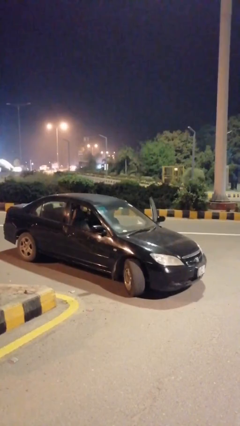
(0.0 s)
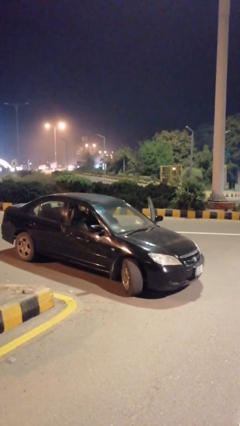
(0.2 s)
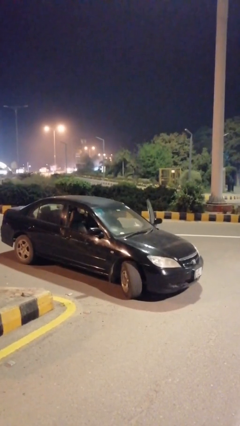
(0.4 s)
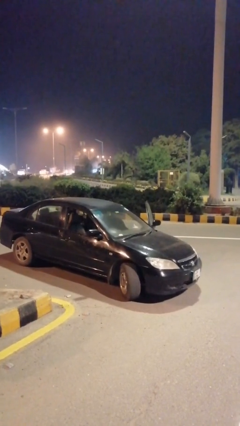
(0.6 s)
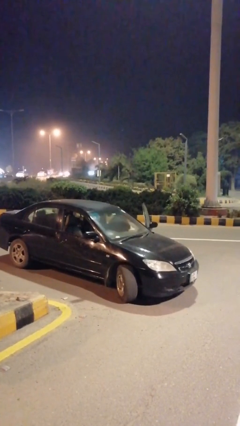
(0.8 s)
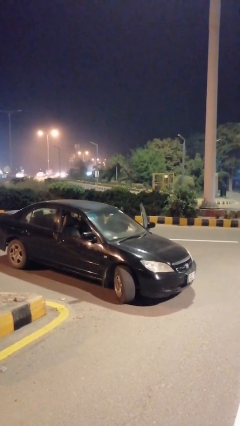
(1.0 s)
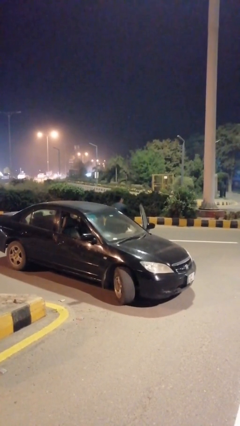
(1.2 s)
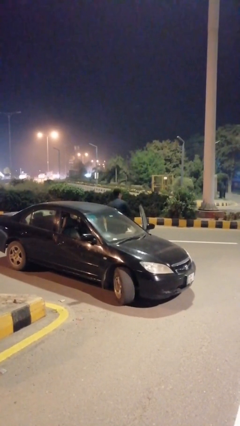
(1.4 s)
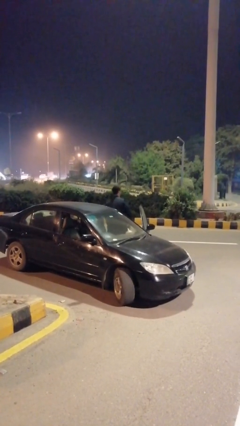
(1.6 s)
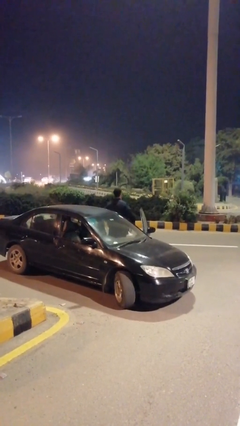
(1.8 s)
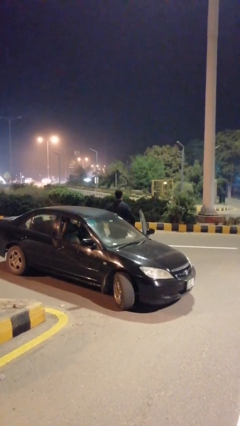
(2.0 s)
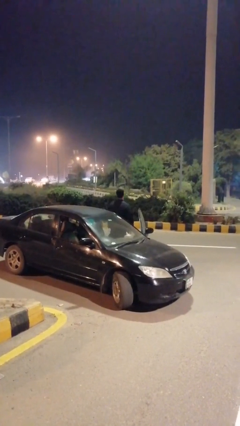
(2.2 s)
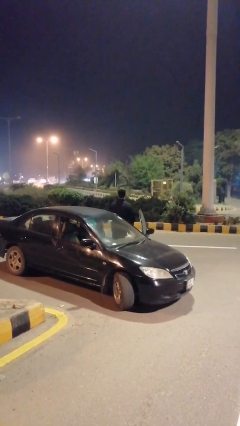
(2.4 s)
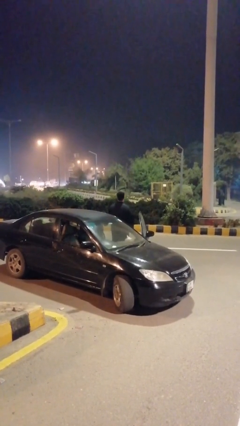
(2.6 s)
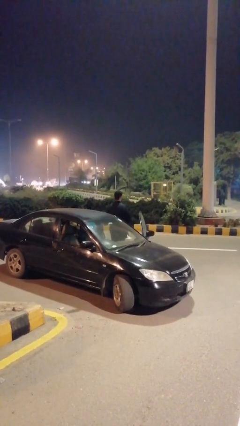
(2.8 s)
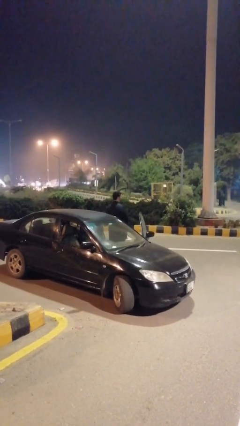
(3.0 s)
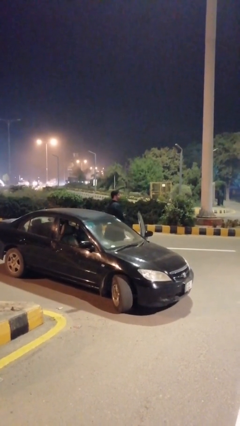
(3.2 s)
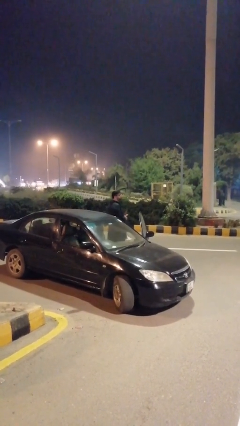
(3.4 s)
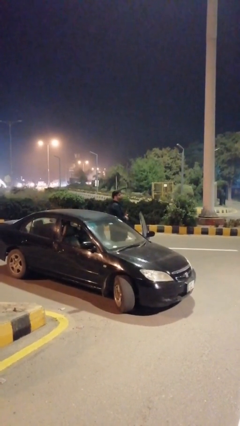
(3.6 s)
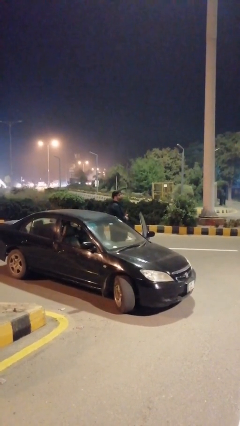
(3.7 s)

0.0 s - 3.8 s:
person exits car

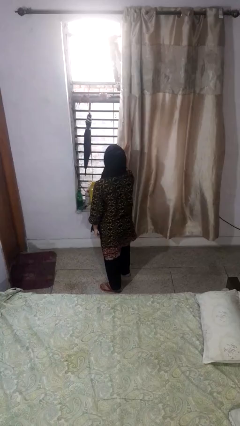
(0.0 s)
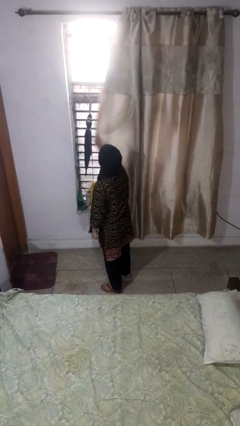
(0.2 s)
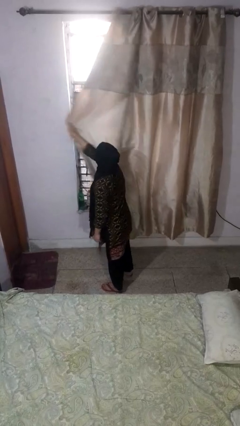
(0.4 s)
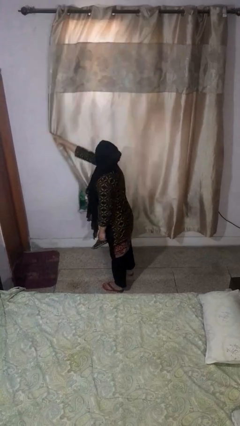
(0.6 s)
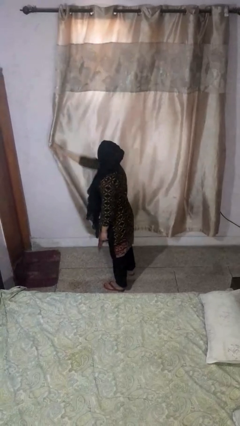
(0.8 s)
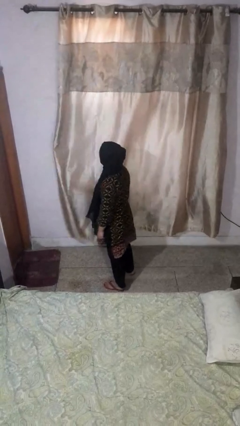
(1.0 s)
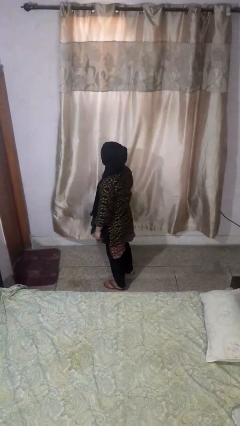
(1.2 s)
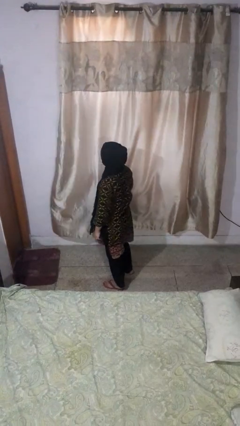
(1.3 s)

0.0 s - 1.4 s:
person closes curtains

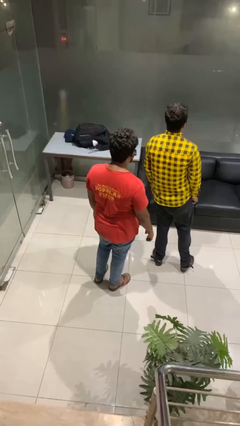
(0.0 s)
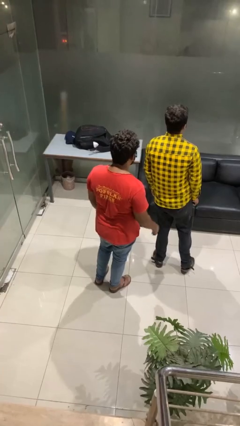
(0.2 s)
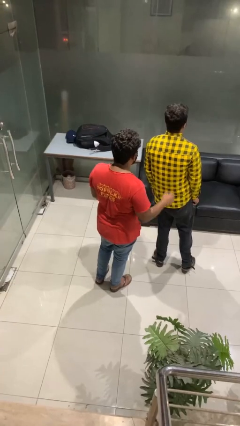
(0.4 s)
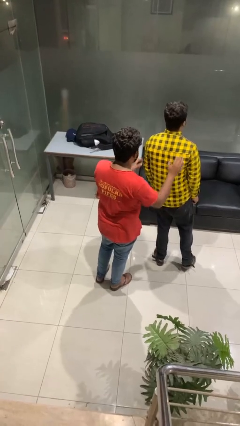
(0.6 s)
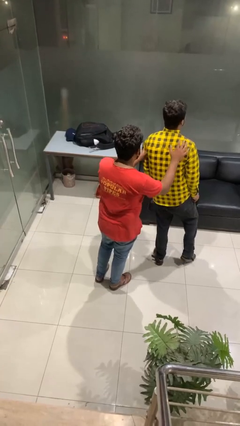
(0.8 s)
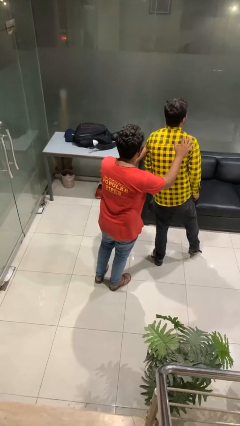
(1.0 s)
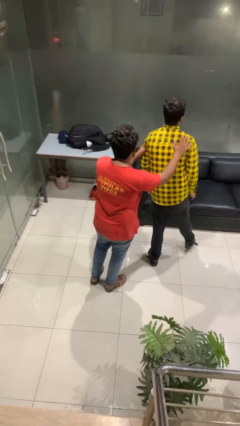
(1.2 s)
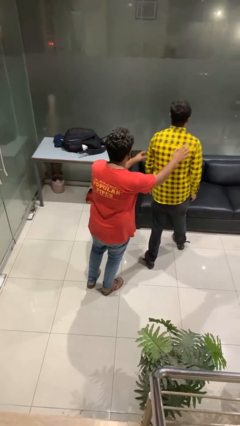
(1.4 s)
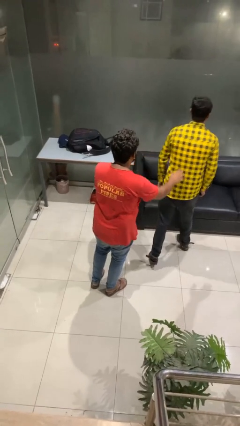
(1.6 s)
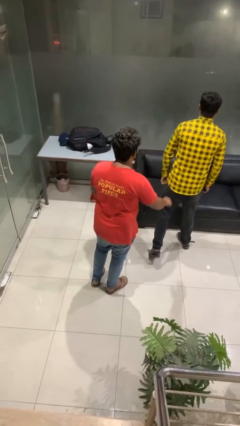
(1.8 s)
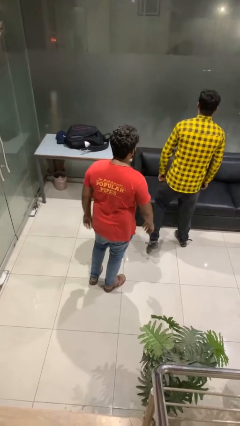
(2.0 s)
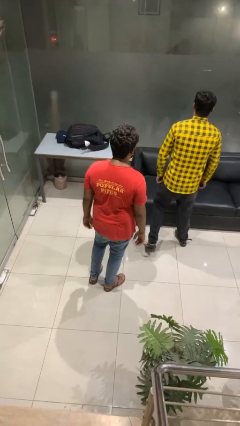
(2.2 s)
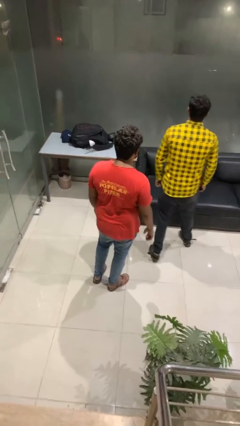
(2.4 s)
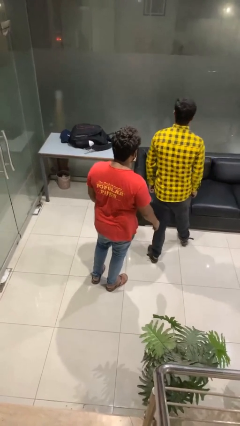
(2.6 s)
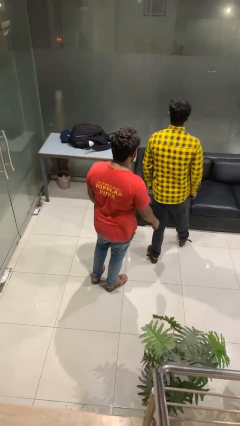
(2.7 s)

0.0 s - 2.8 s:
person shoves person

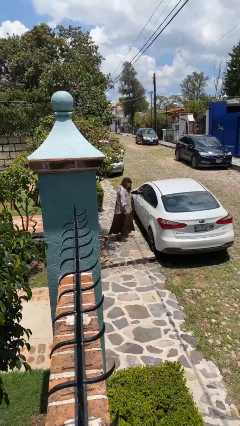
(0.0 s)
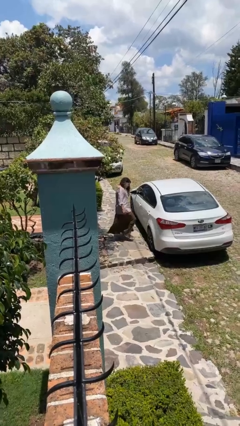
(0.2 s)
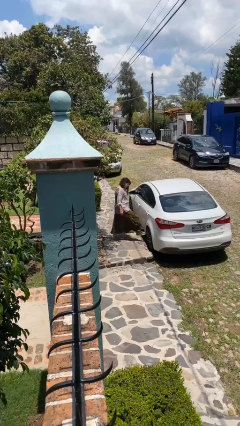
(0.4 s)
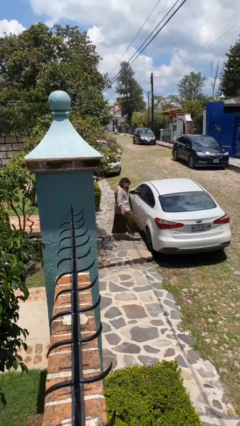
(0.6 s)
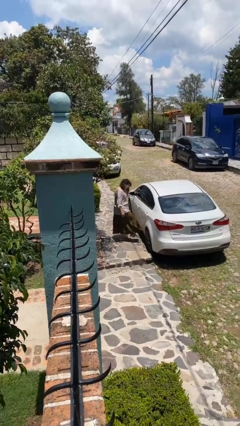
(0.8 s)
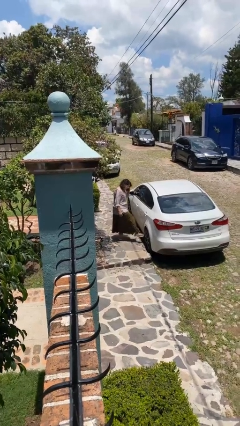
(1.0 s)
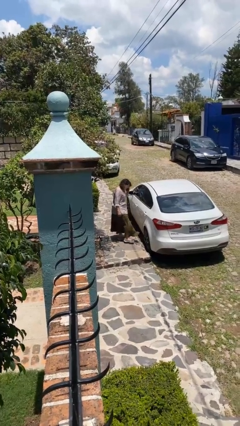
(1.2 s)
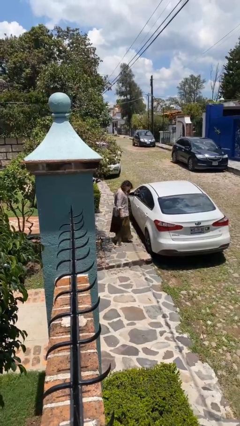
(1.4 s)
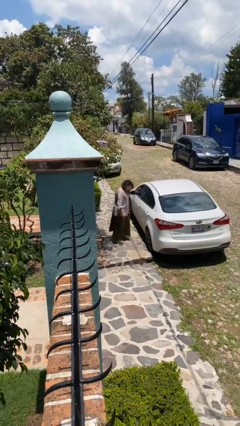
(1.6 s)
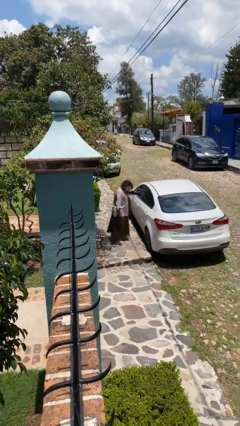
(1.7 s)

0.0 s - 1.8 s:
person kicks car tires

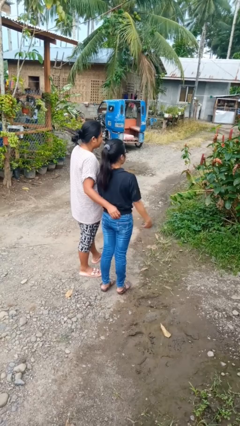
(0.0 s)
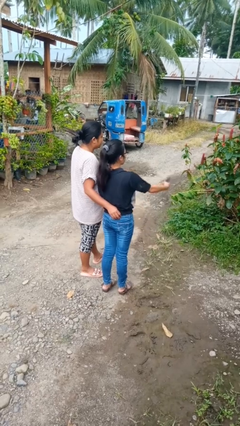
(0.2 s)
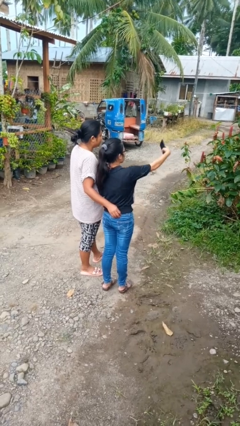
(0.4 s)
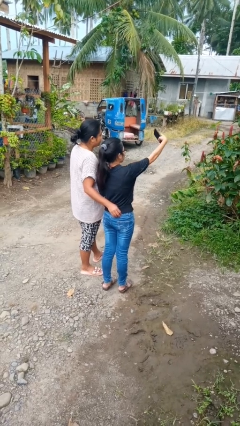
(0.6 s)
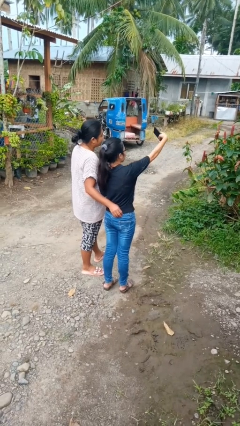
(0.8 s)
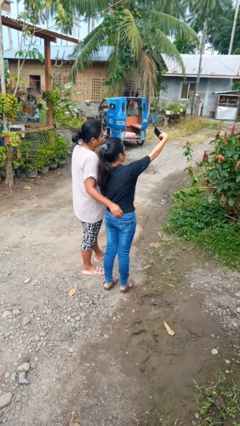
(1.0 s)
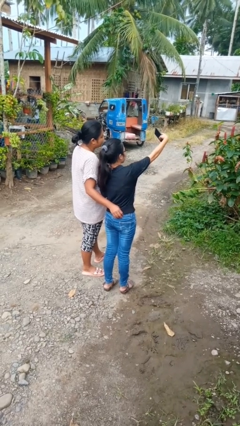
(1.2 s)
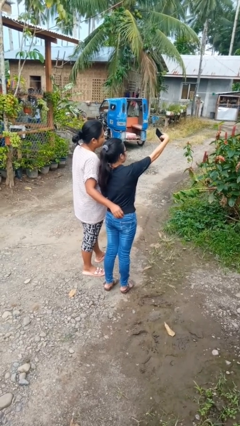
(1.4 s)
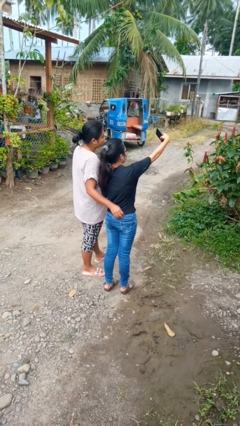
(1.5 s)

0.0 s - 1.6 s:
person takes selfie with person

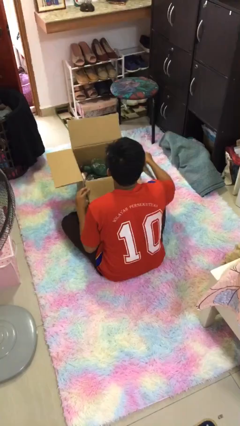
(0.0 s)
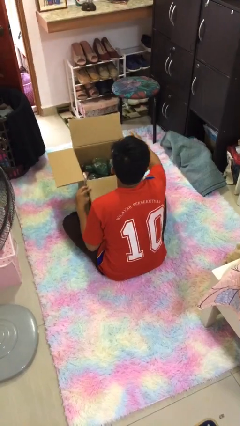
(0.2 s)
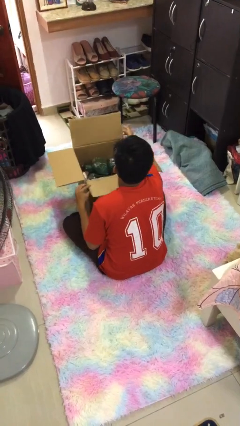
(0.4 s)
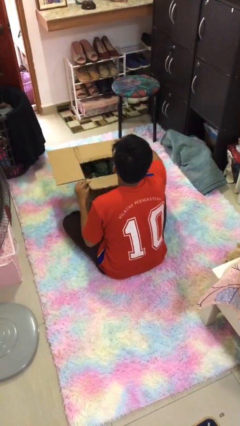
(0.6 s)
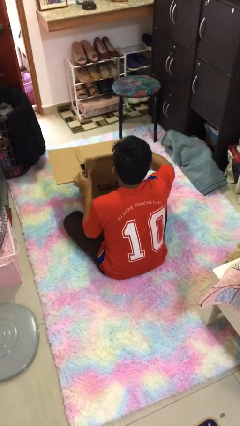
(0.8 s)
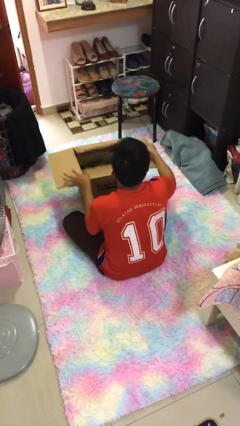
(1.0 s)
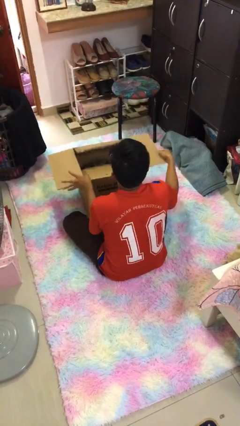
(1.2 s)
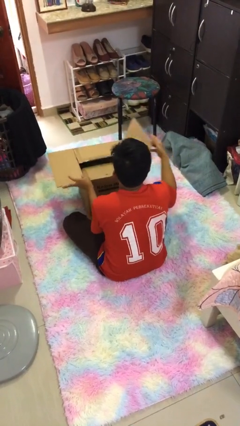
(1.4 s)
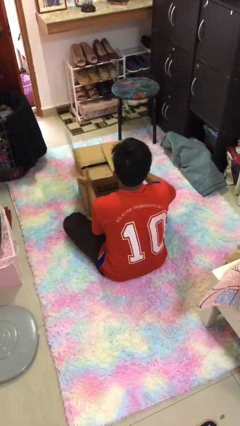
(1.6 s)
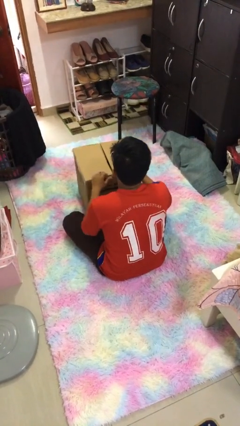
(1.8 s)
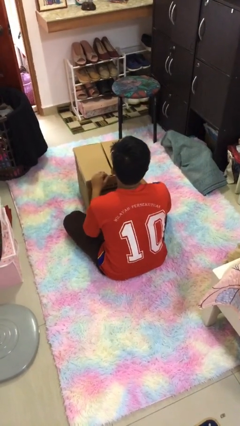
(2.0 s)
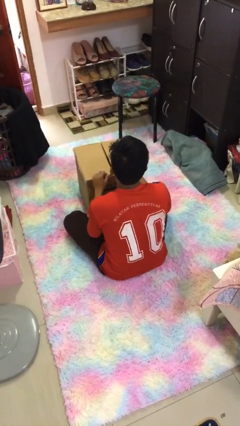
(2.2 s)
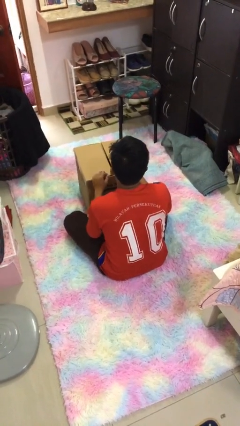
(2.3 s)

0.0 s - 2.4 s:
person closes box

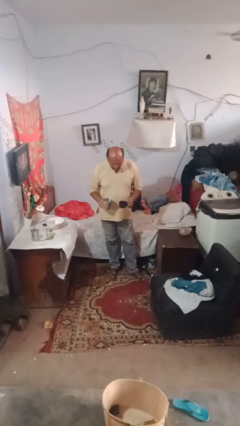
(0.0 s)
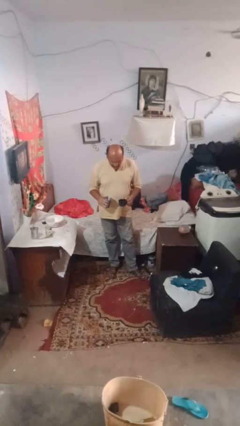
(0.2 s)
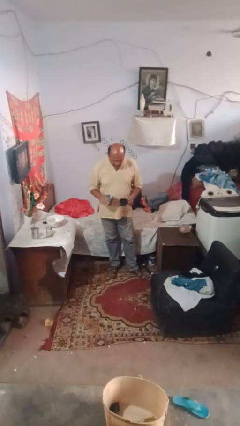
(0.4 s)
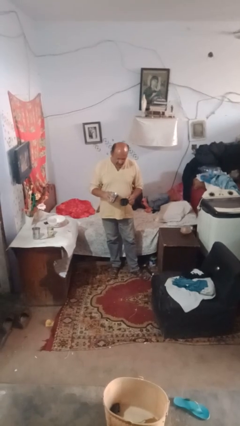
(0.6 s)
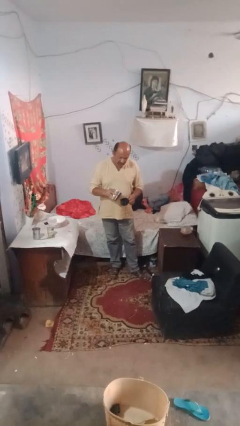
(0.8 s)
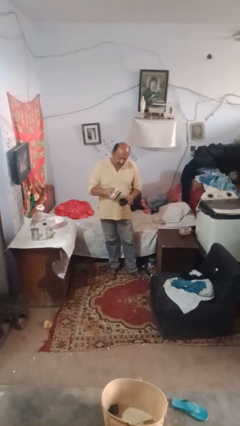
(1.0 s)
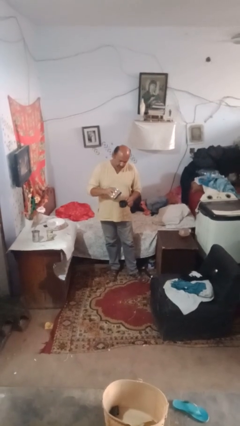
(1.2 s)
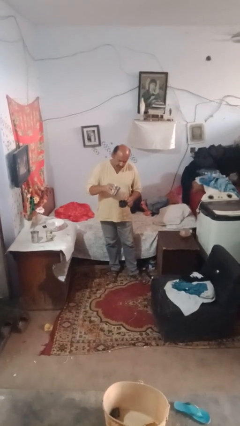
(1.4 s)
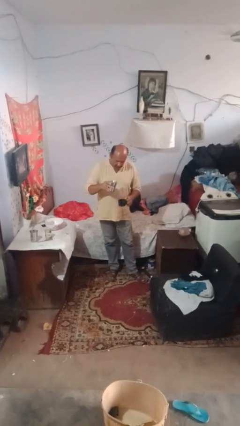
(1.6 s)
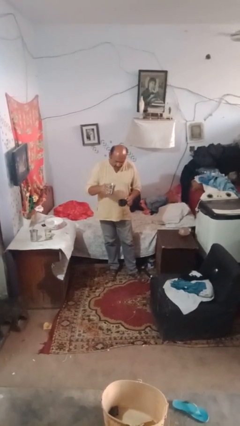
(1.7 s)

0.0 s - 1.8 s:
person pours liquid into cup

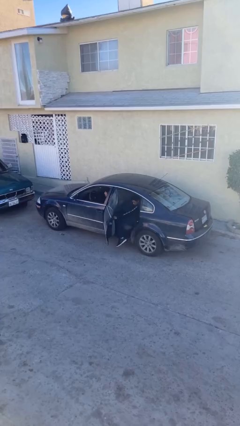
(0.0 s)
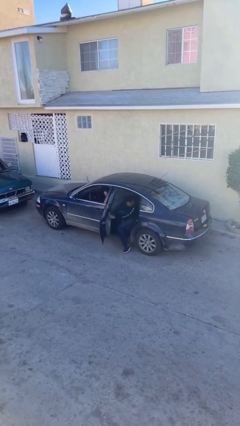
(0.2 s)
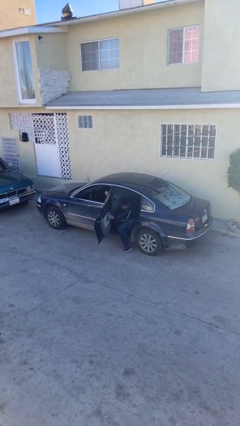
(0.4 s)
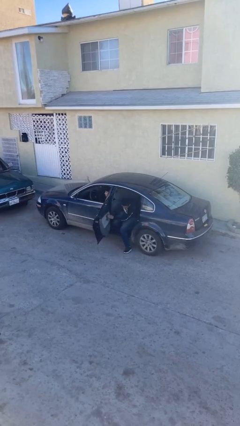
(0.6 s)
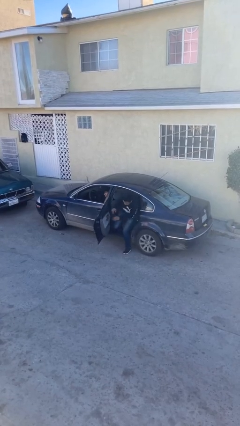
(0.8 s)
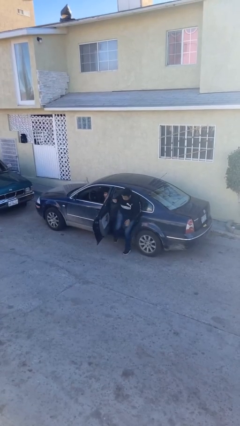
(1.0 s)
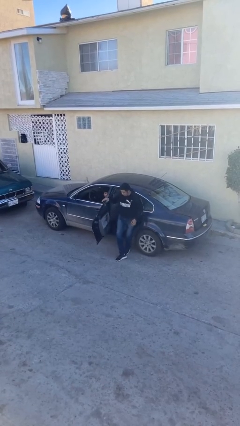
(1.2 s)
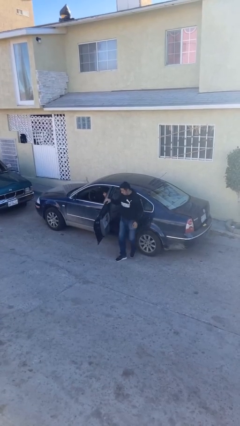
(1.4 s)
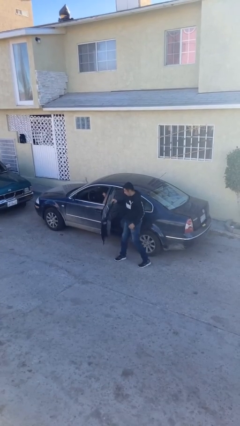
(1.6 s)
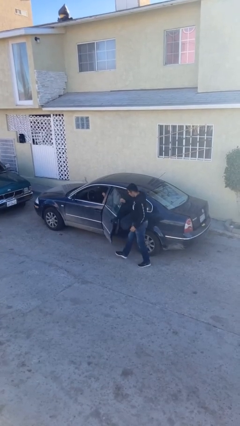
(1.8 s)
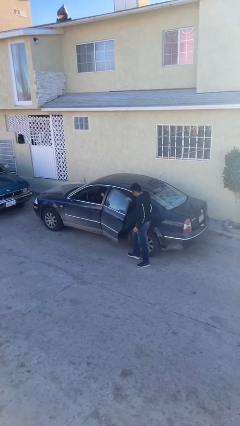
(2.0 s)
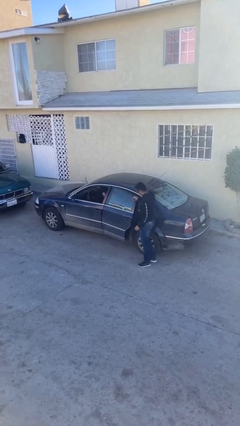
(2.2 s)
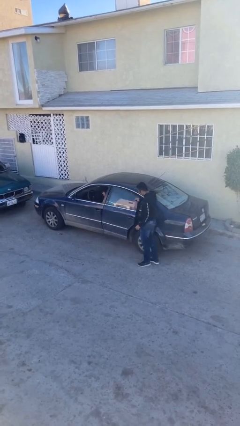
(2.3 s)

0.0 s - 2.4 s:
car drops off person
